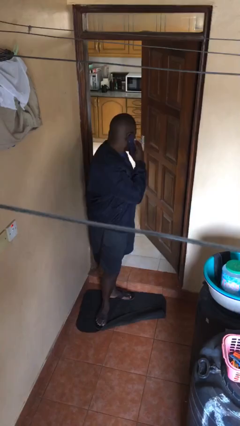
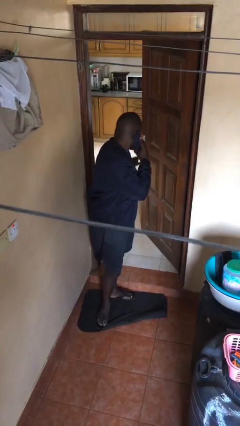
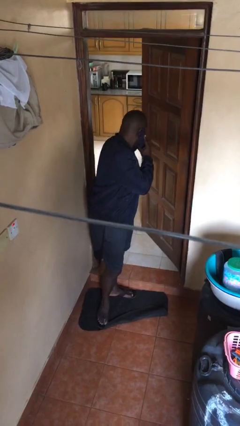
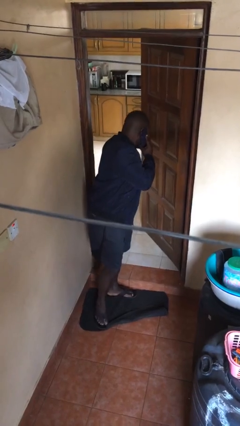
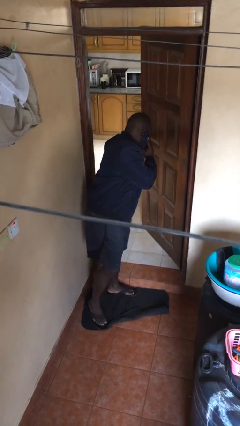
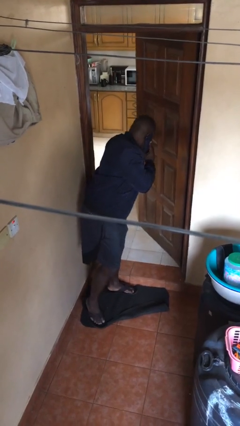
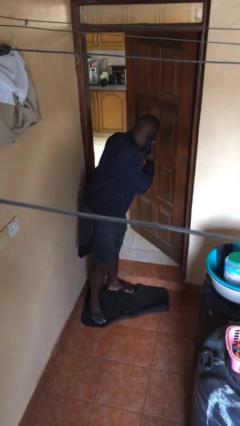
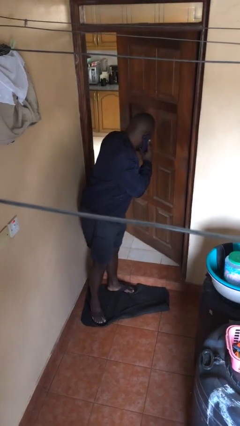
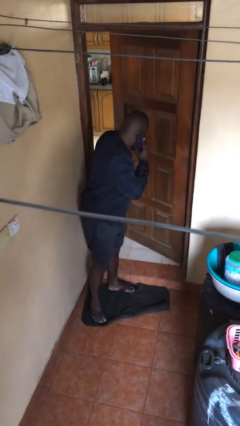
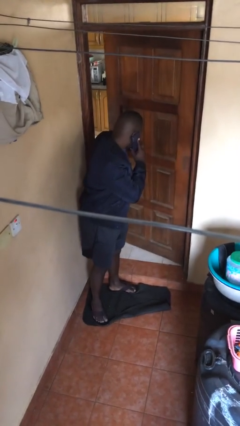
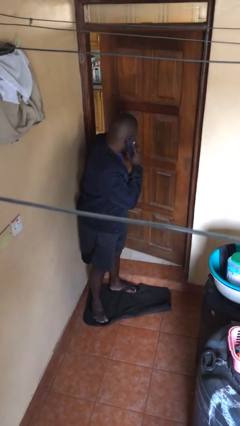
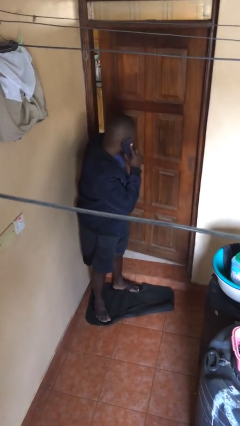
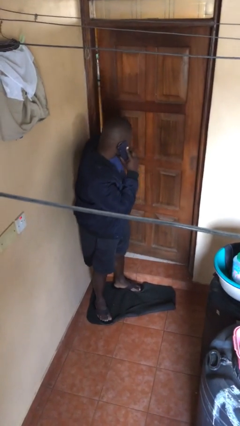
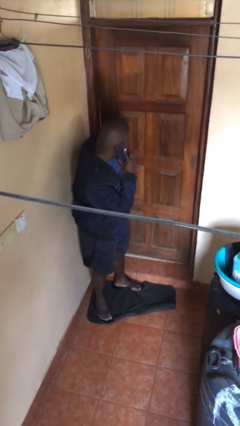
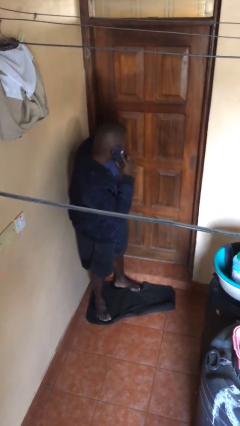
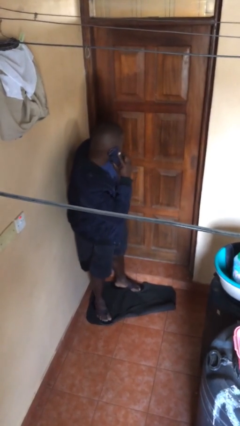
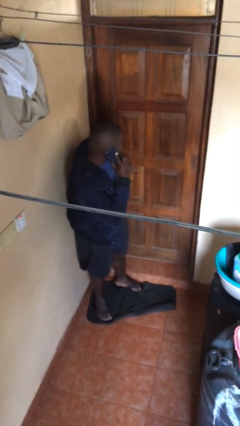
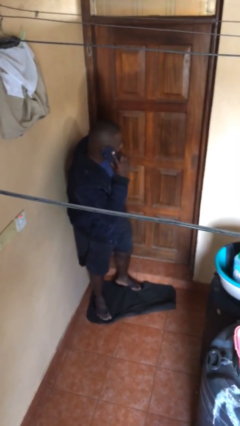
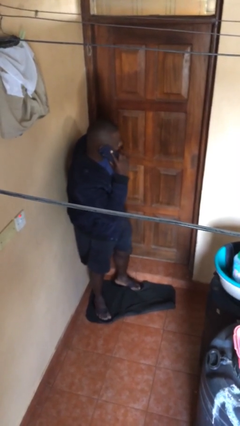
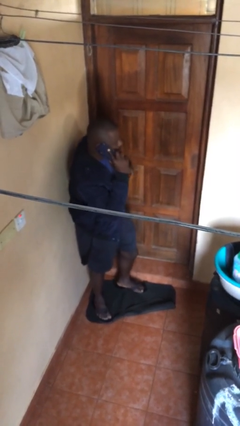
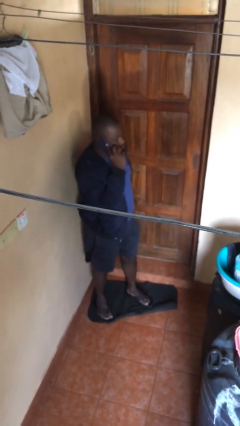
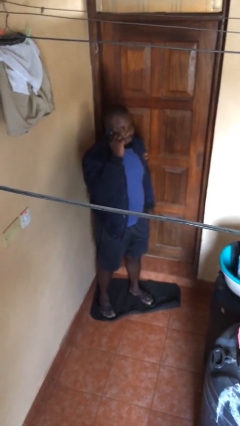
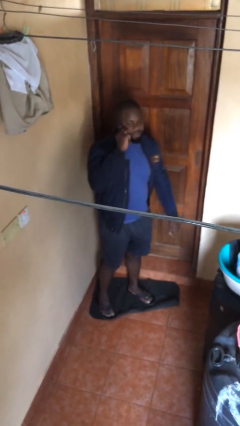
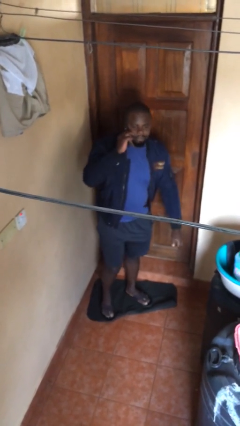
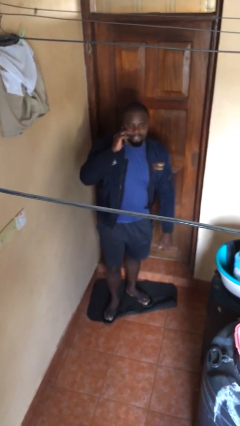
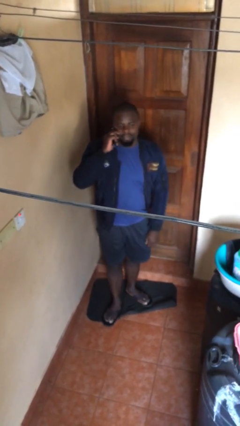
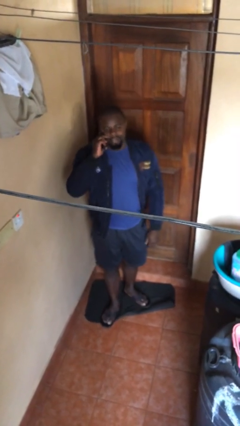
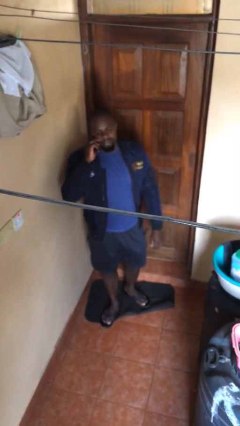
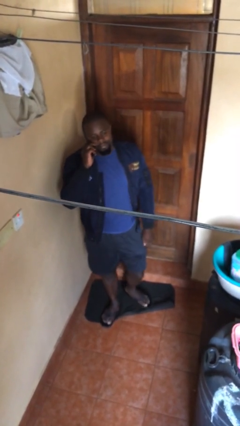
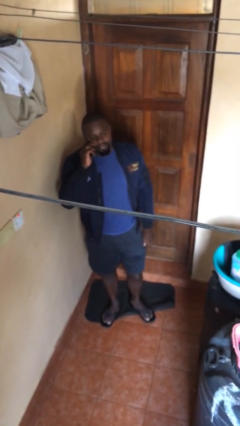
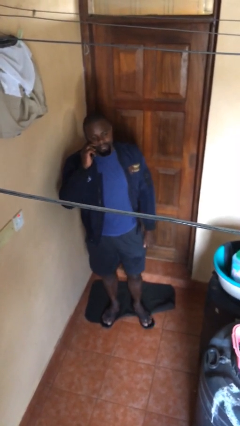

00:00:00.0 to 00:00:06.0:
person closes facility door

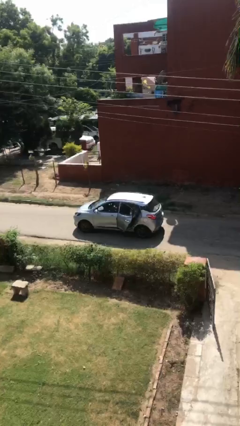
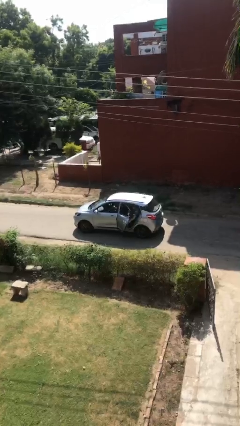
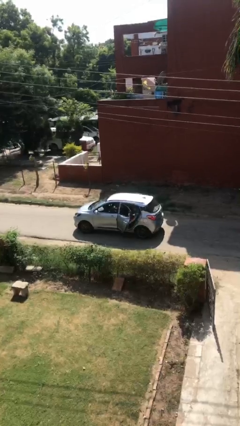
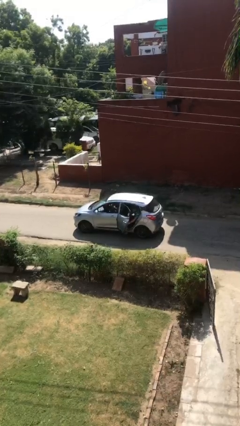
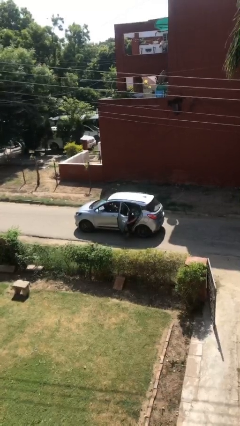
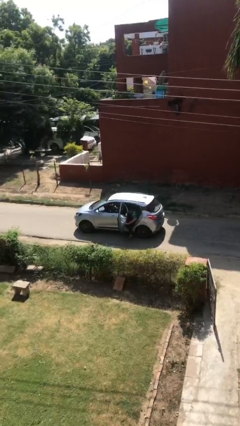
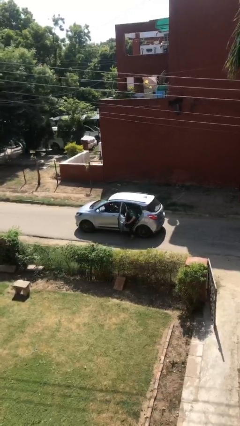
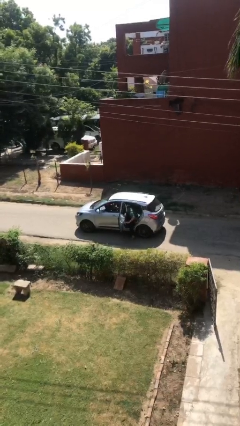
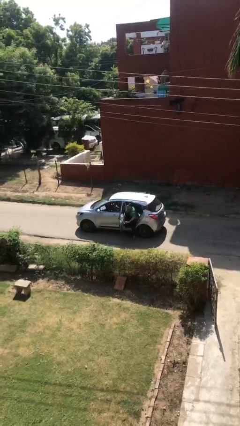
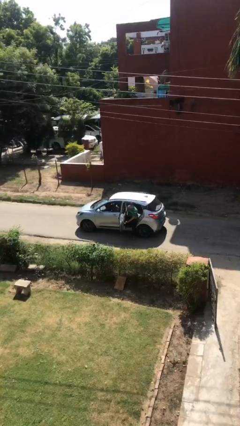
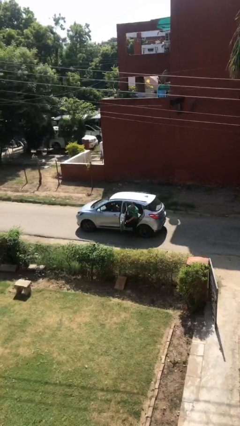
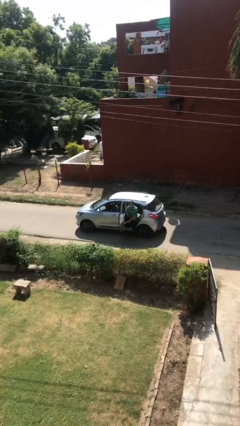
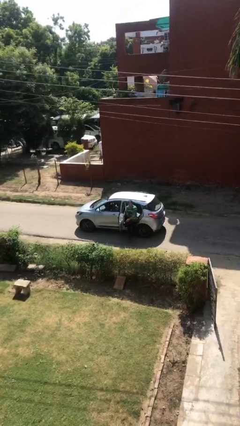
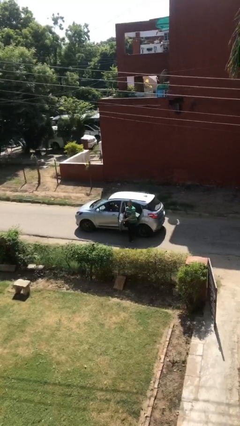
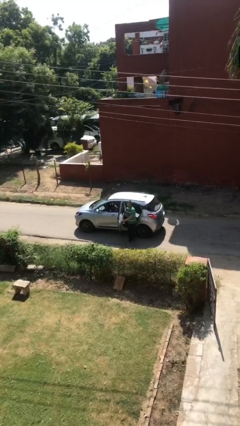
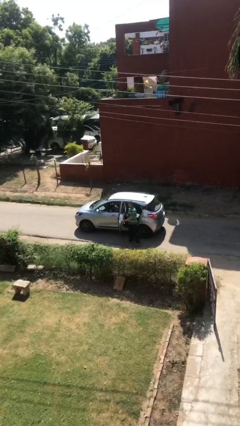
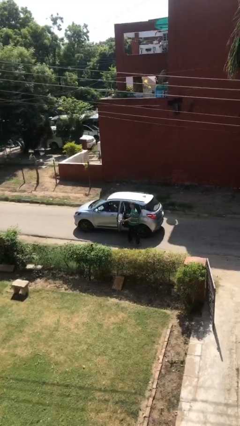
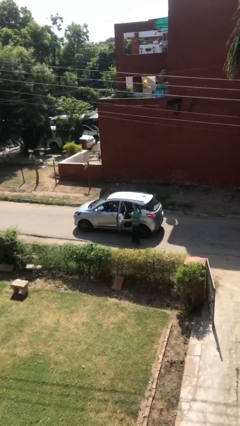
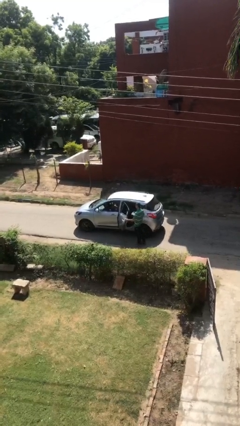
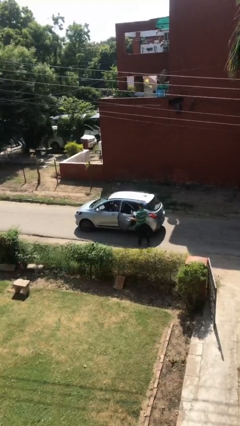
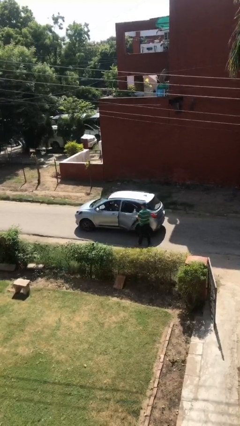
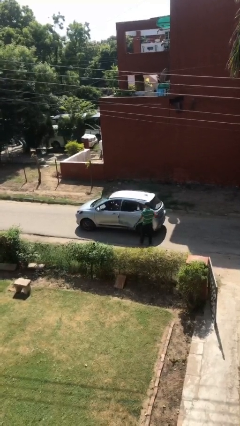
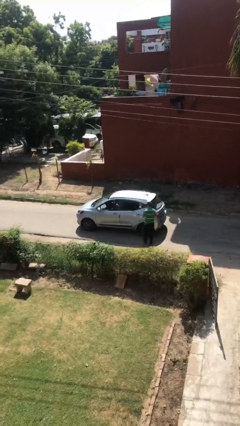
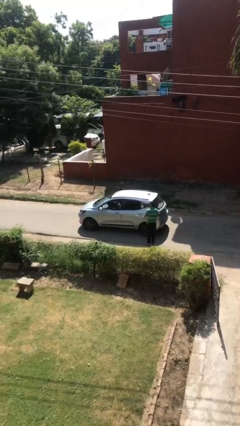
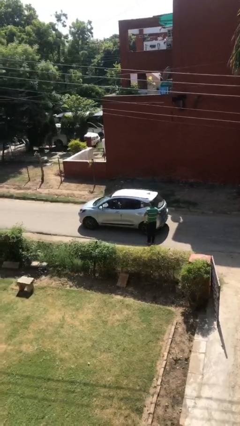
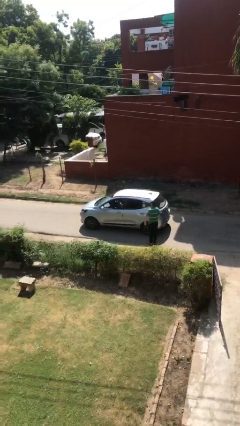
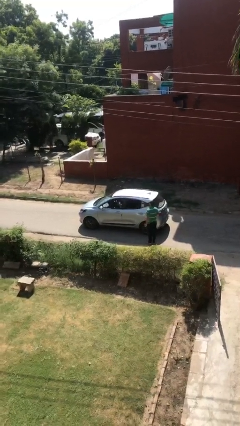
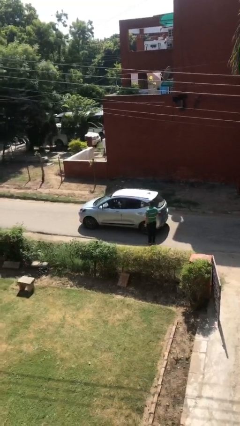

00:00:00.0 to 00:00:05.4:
car drops off person

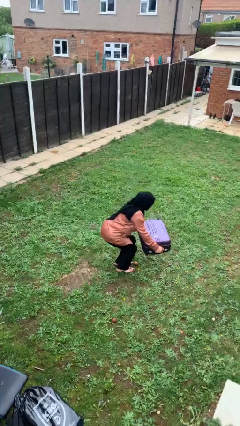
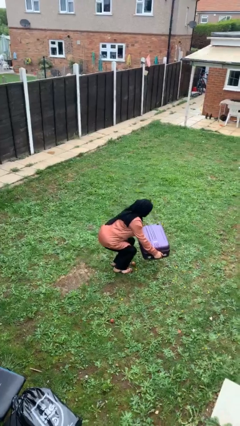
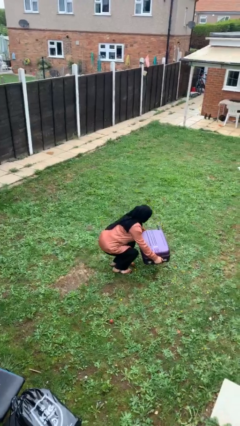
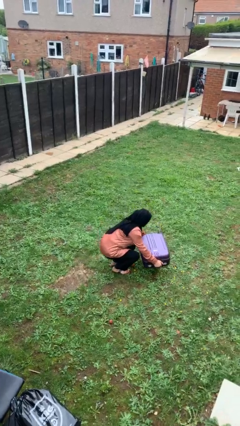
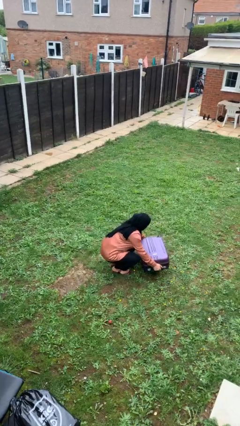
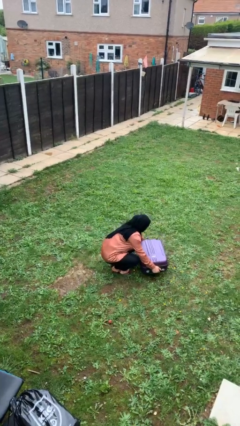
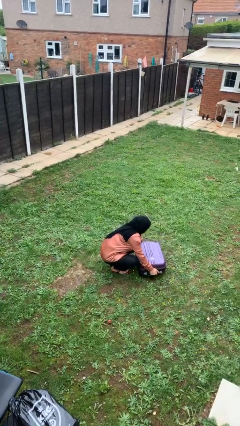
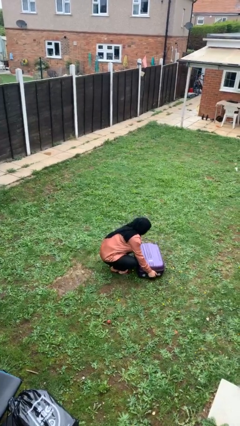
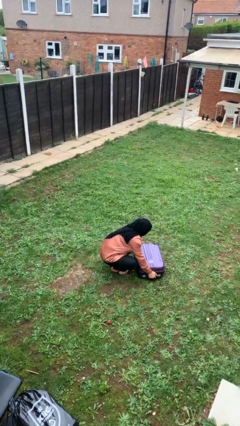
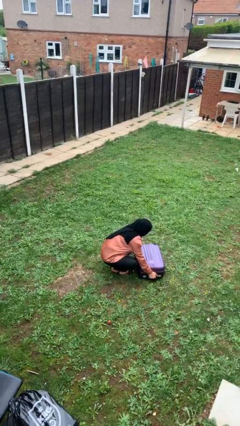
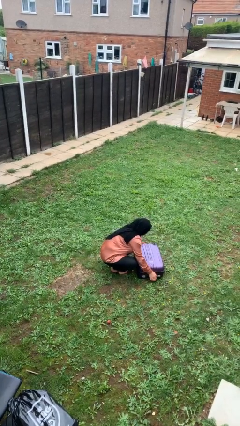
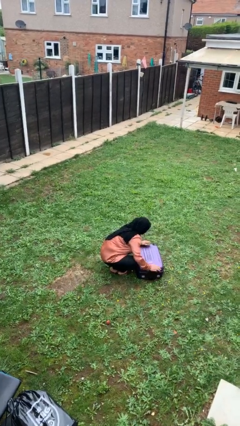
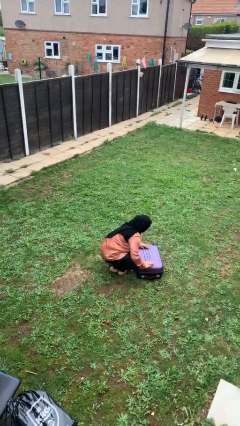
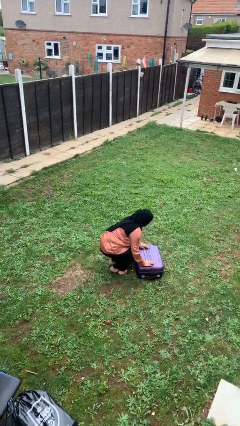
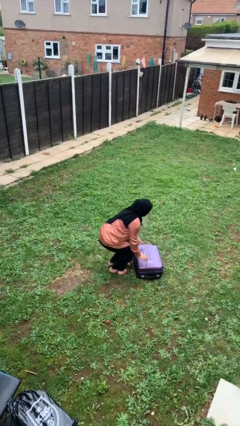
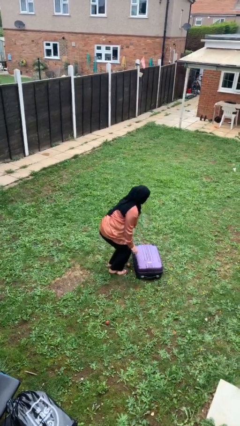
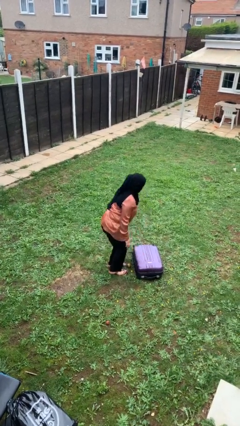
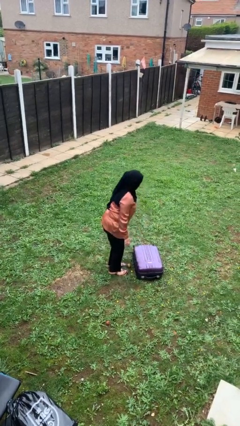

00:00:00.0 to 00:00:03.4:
person puts down object on floor

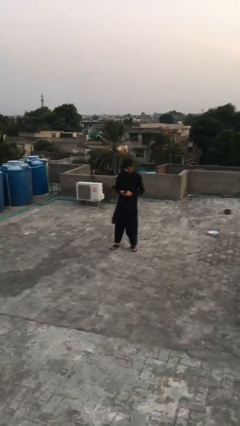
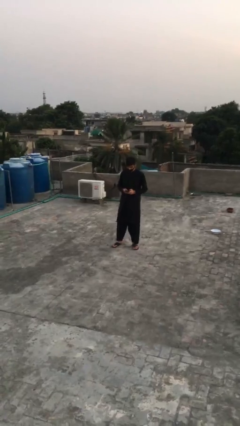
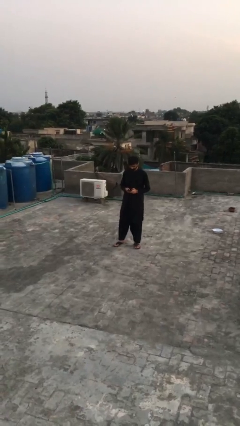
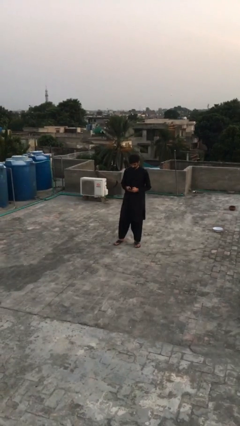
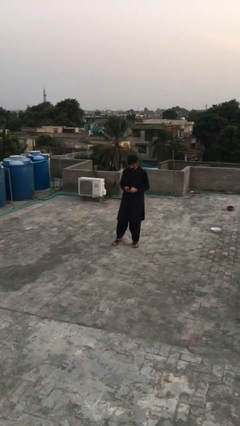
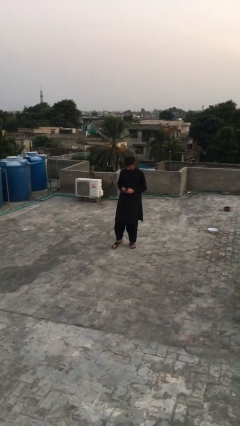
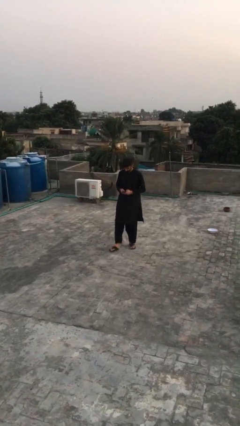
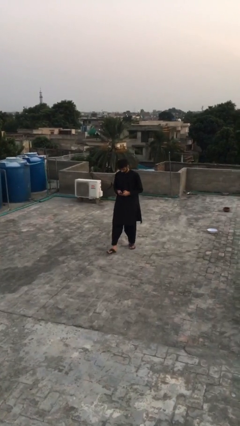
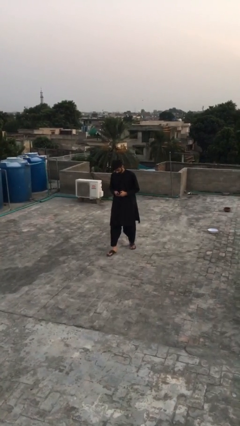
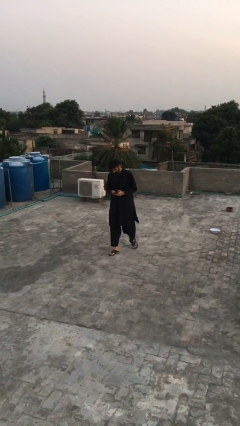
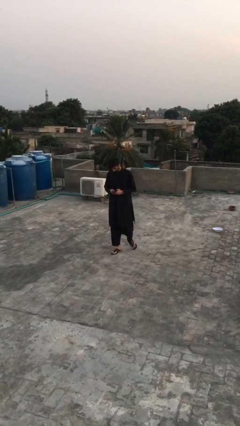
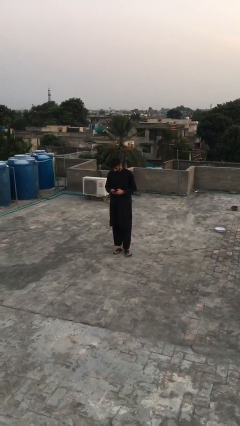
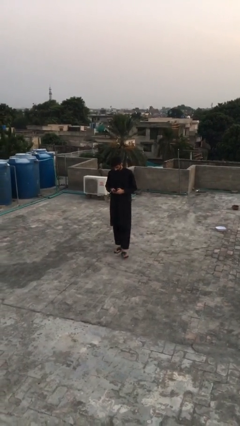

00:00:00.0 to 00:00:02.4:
person texts on phone

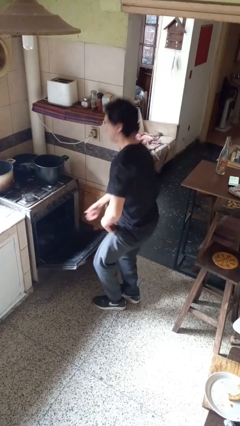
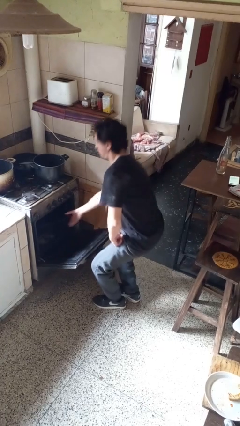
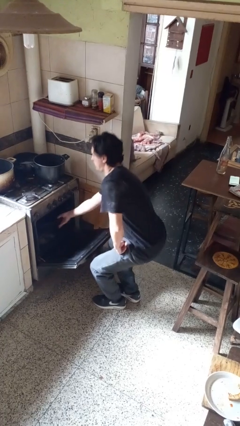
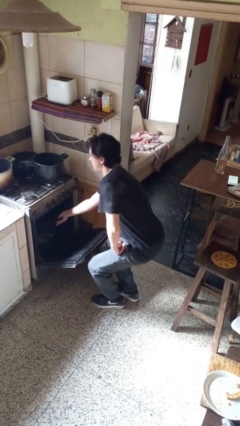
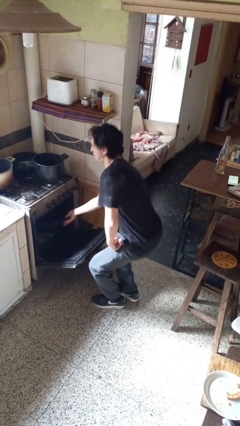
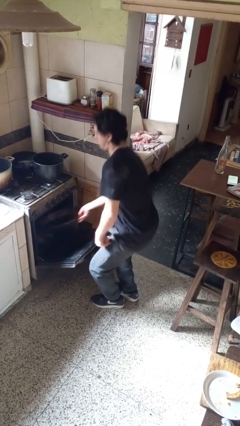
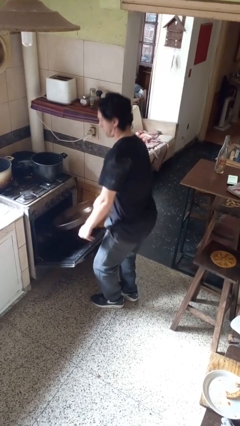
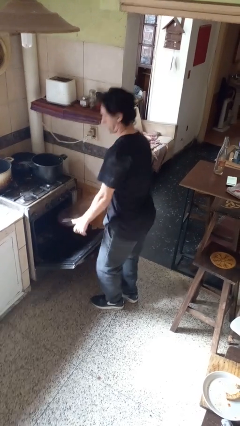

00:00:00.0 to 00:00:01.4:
person takes object from oven
